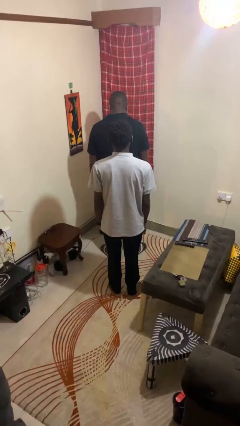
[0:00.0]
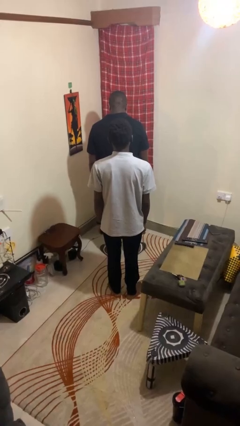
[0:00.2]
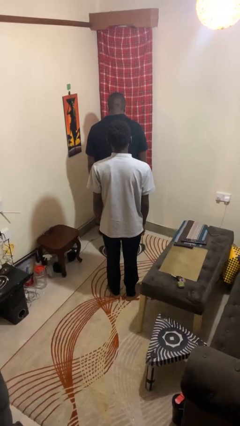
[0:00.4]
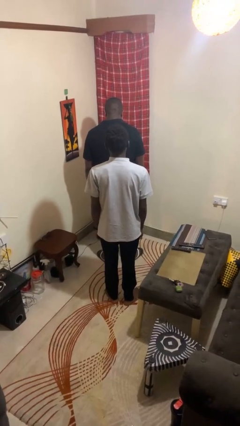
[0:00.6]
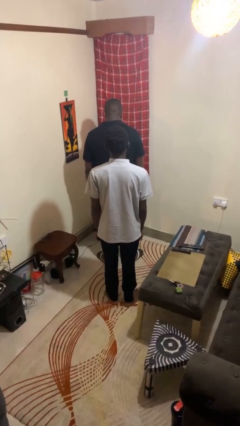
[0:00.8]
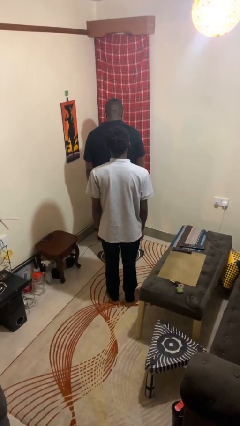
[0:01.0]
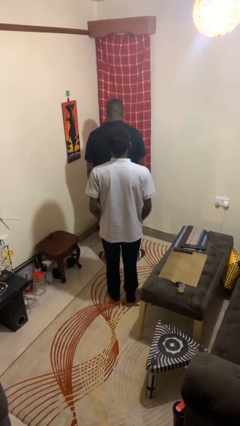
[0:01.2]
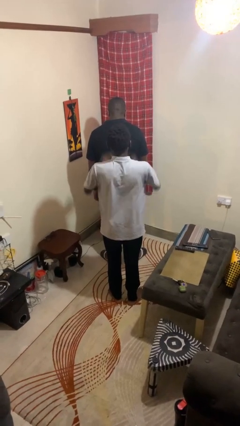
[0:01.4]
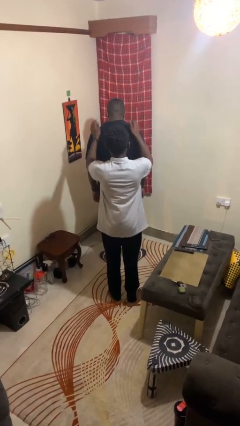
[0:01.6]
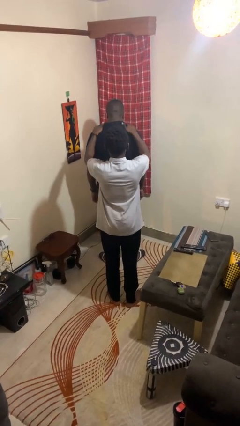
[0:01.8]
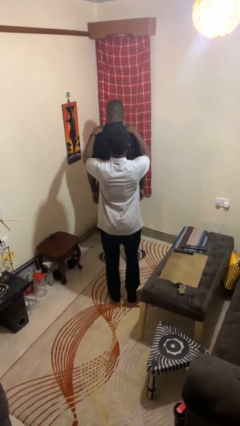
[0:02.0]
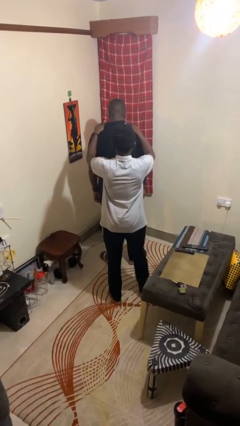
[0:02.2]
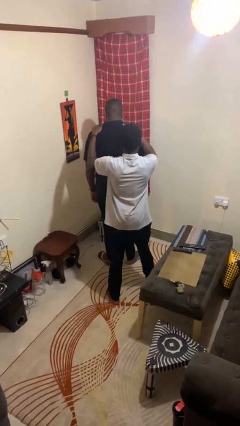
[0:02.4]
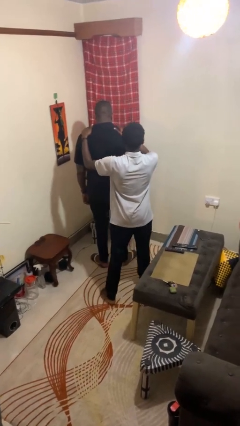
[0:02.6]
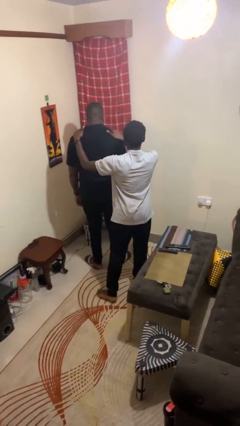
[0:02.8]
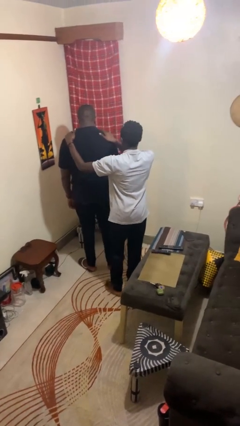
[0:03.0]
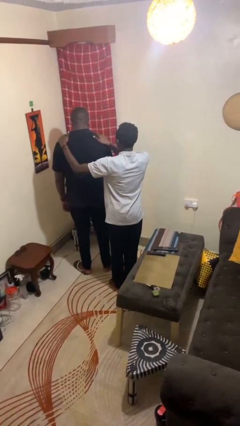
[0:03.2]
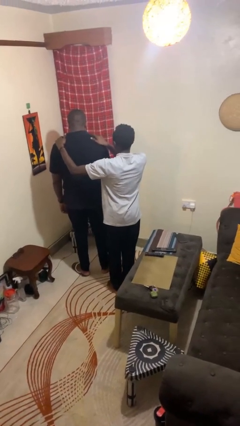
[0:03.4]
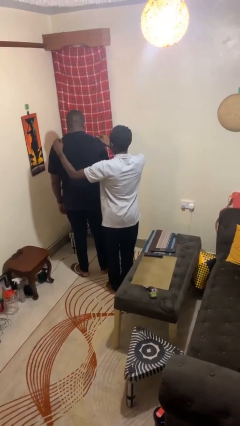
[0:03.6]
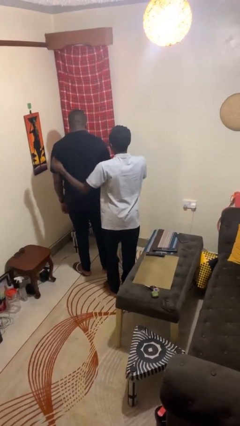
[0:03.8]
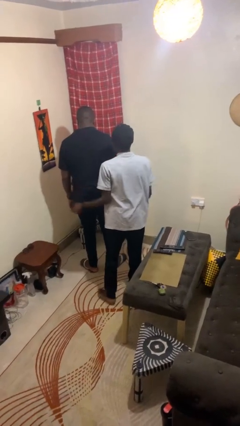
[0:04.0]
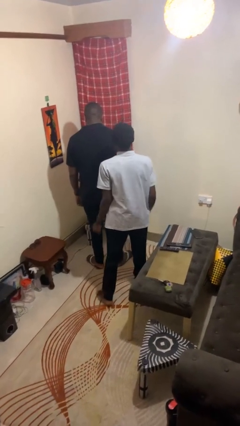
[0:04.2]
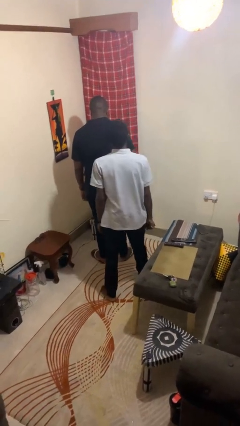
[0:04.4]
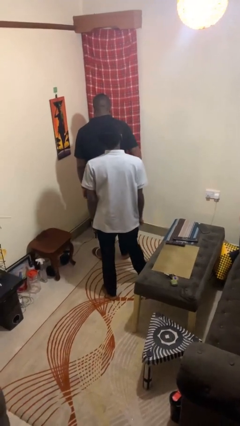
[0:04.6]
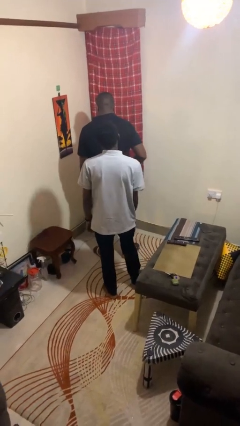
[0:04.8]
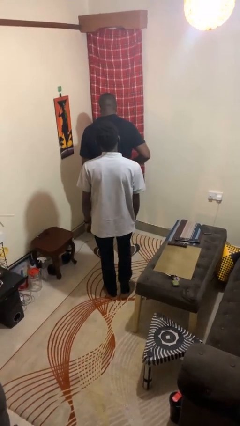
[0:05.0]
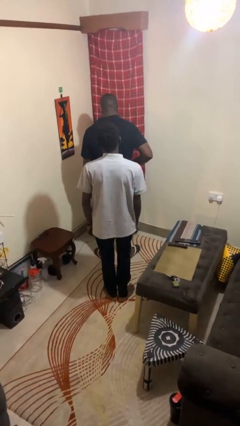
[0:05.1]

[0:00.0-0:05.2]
person pounds shoulders of person

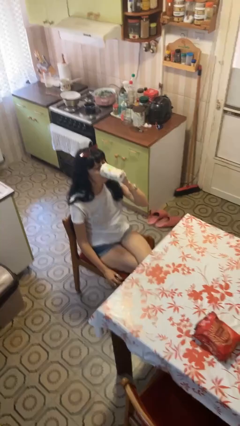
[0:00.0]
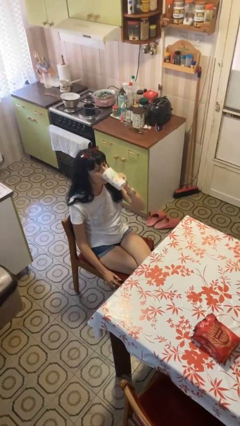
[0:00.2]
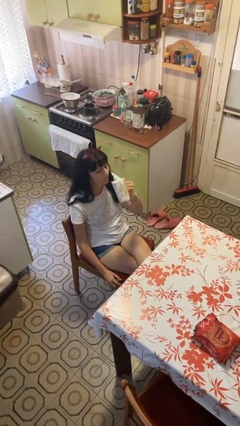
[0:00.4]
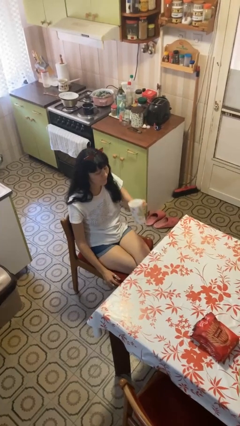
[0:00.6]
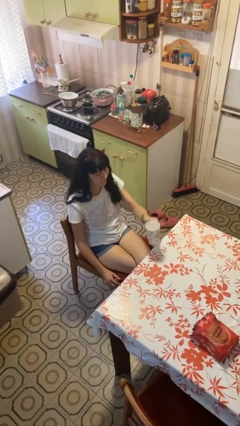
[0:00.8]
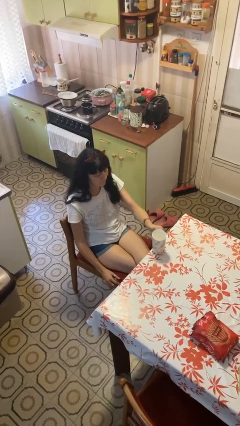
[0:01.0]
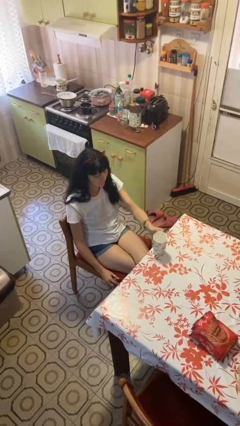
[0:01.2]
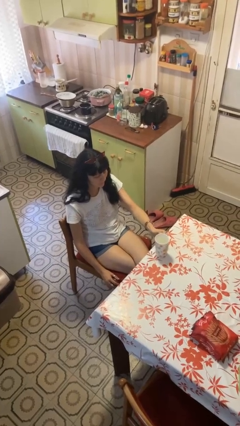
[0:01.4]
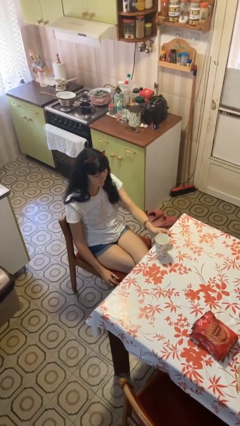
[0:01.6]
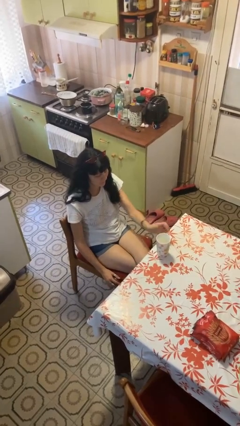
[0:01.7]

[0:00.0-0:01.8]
person puts down object on table

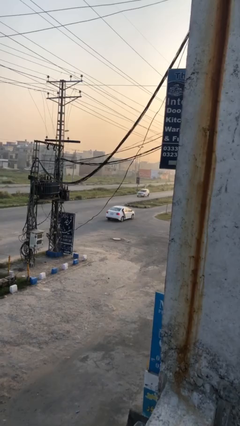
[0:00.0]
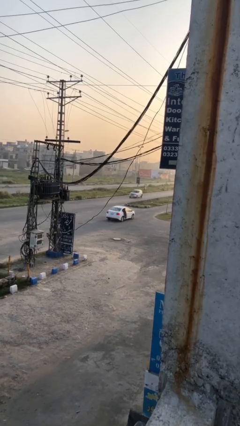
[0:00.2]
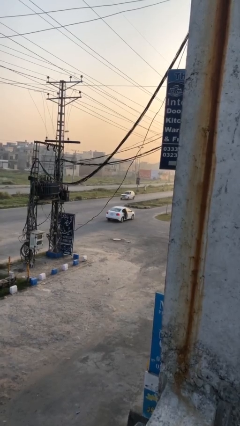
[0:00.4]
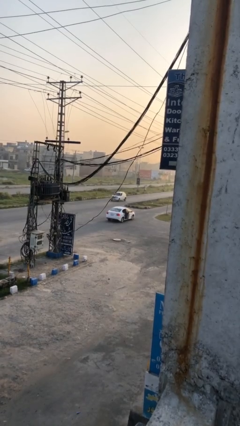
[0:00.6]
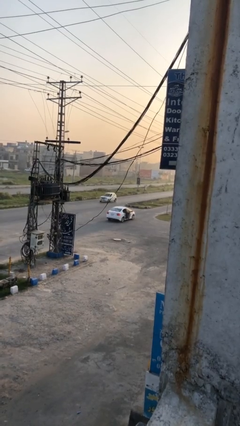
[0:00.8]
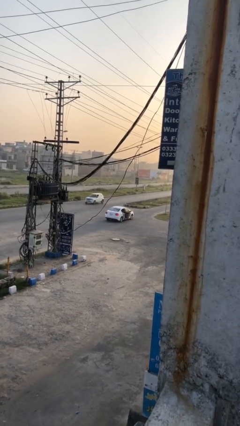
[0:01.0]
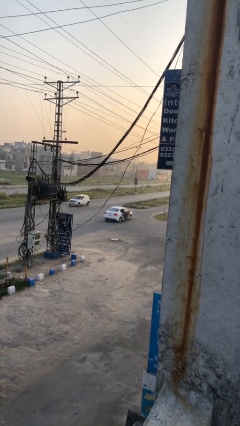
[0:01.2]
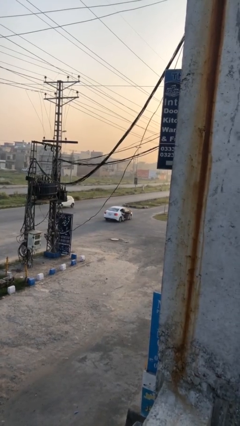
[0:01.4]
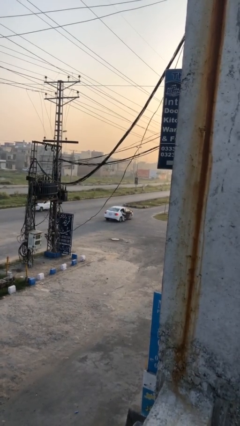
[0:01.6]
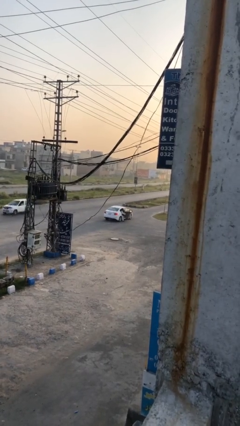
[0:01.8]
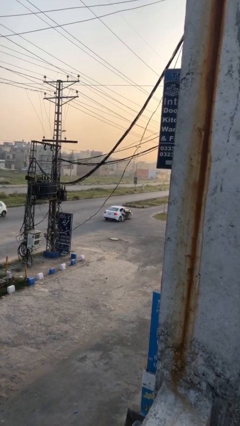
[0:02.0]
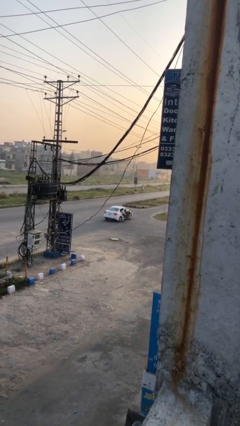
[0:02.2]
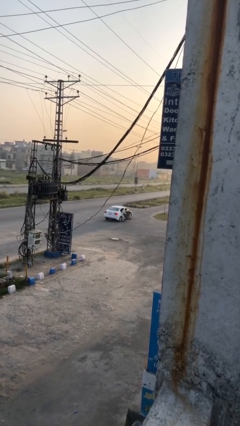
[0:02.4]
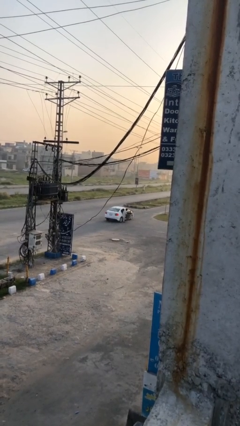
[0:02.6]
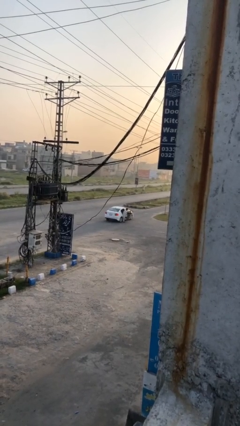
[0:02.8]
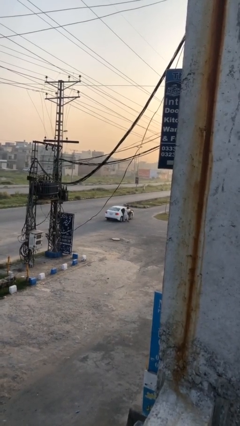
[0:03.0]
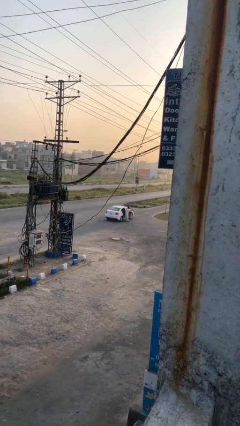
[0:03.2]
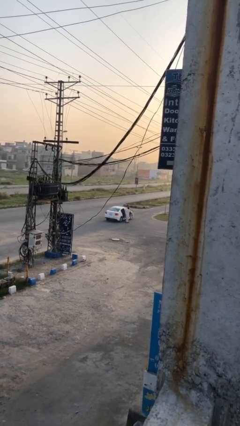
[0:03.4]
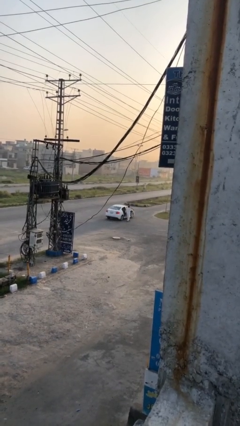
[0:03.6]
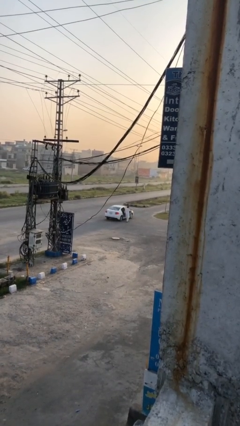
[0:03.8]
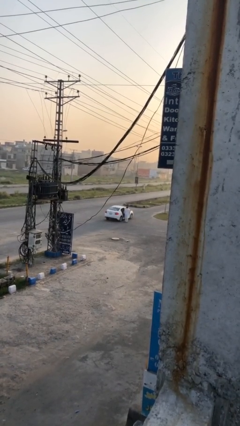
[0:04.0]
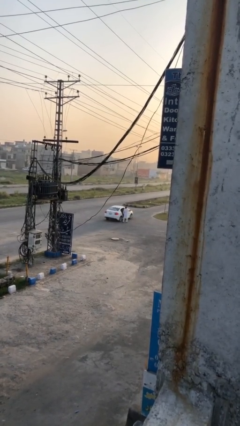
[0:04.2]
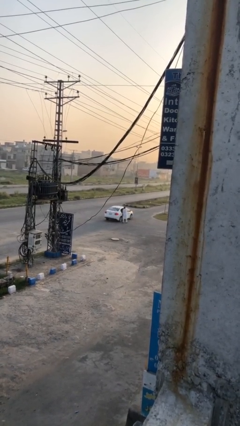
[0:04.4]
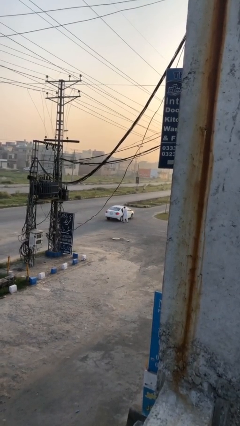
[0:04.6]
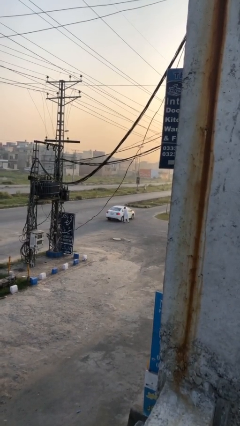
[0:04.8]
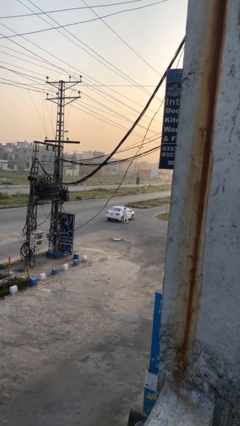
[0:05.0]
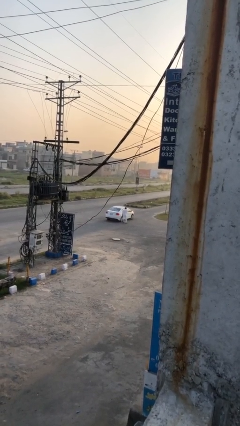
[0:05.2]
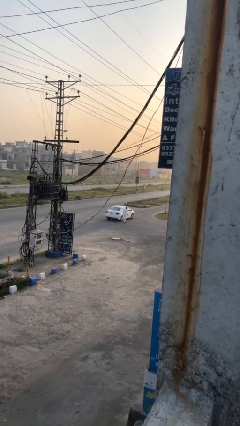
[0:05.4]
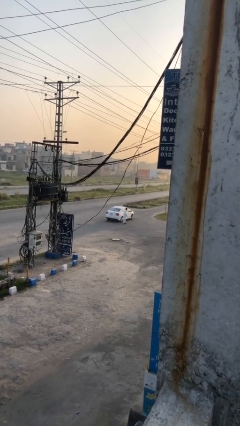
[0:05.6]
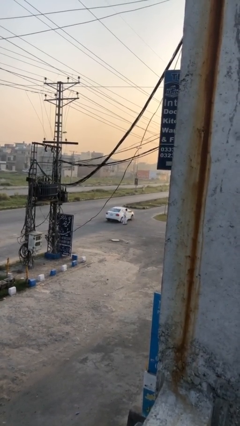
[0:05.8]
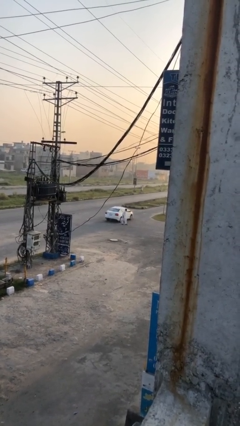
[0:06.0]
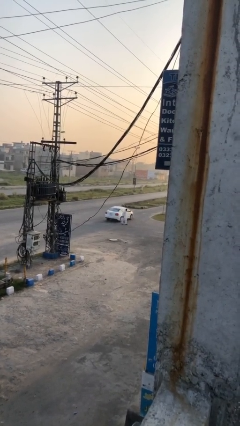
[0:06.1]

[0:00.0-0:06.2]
car drops off person

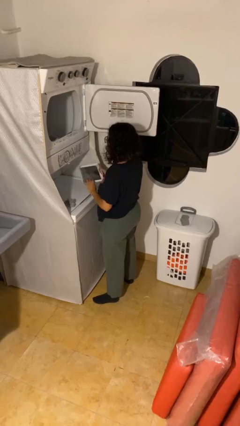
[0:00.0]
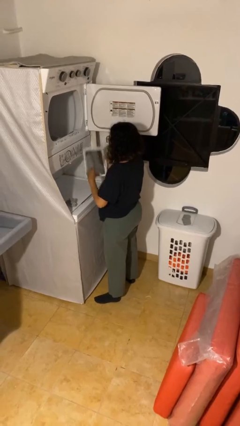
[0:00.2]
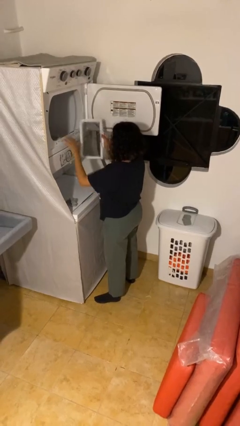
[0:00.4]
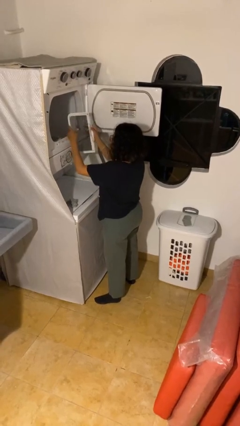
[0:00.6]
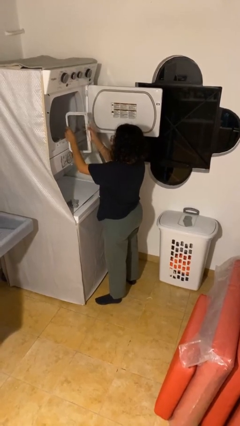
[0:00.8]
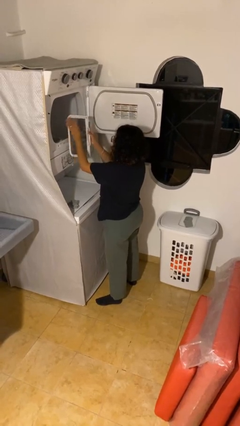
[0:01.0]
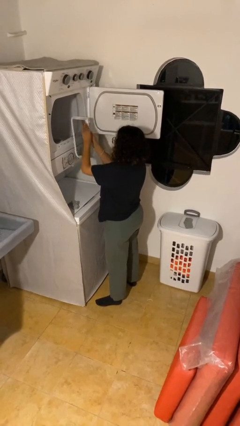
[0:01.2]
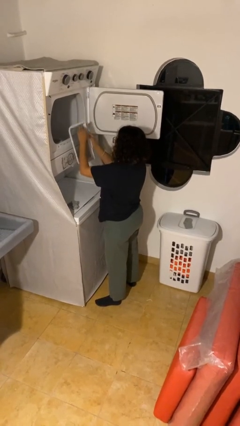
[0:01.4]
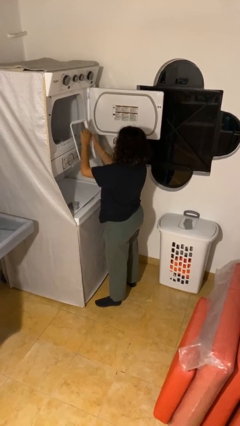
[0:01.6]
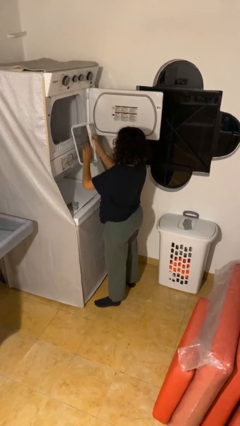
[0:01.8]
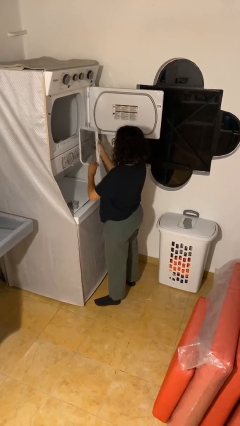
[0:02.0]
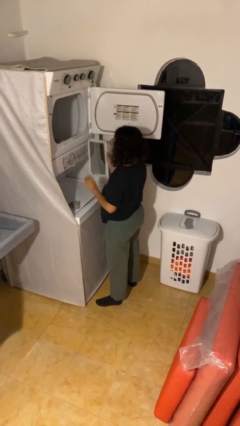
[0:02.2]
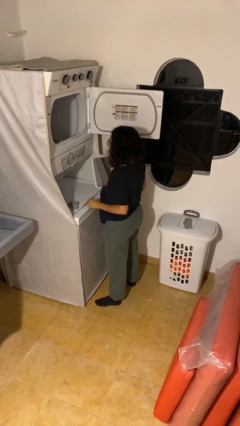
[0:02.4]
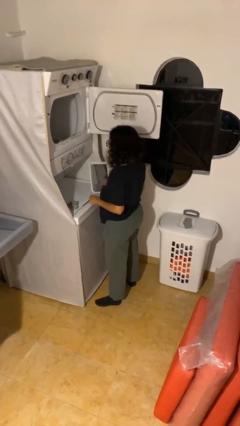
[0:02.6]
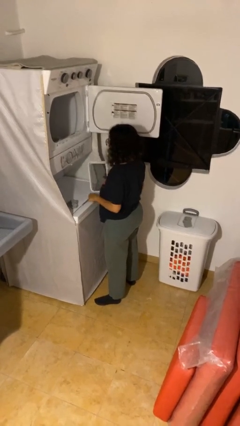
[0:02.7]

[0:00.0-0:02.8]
person cleans dryer lint trap

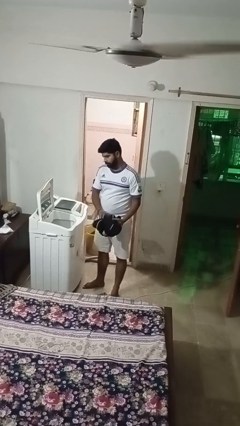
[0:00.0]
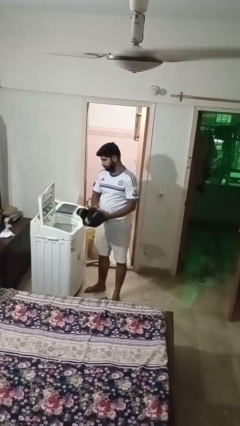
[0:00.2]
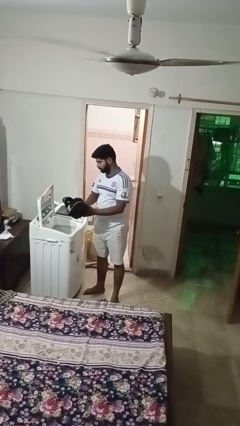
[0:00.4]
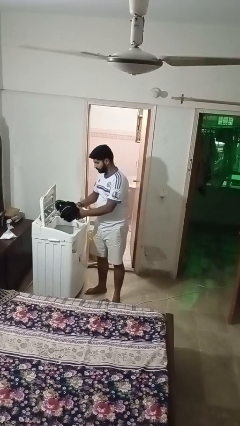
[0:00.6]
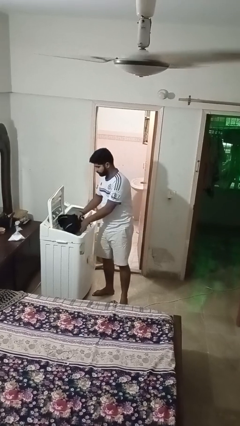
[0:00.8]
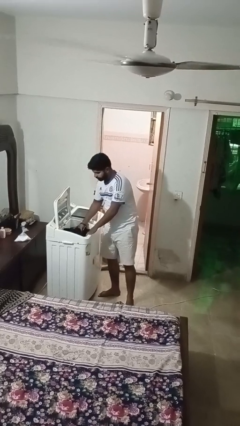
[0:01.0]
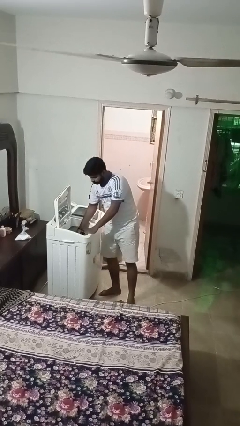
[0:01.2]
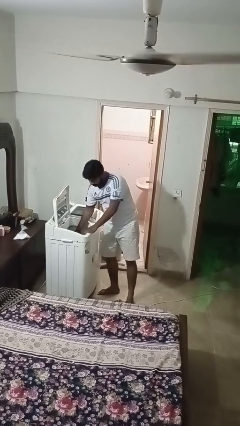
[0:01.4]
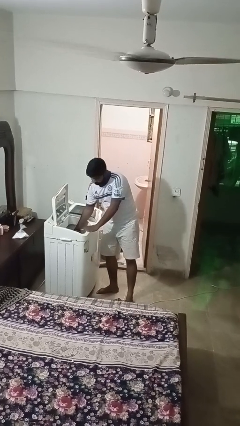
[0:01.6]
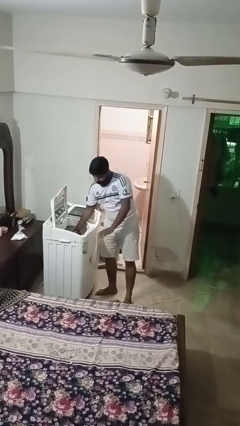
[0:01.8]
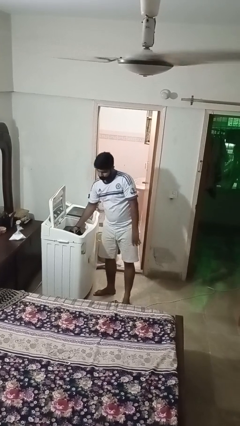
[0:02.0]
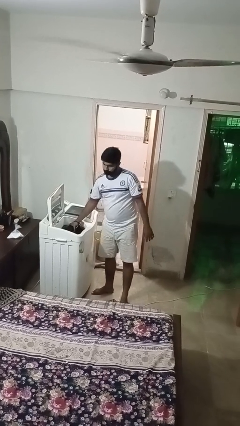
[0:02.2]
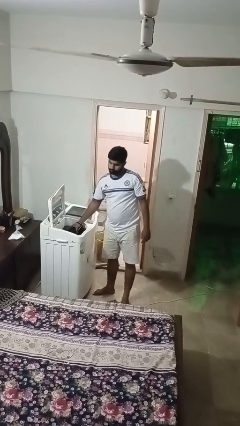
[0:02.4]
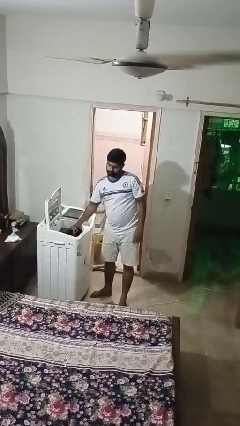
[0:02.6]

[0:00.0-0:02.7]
person loads clotheswasher
